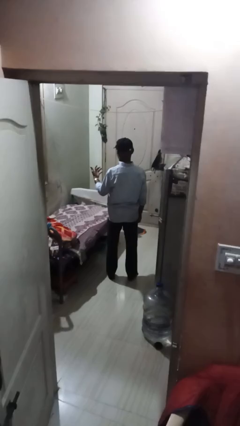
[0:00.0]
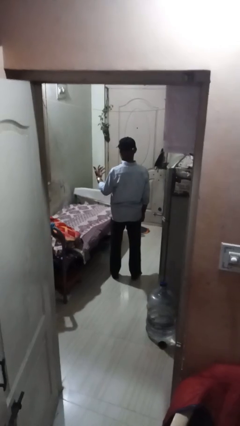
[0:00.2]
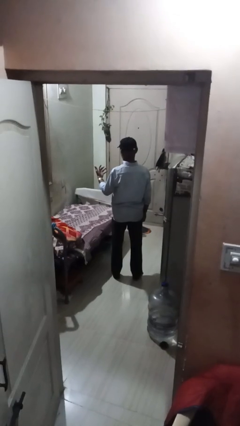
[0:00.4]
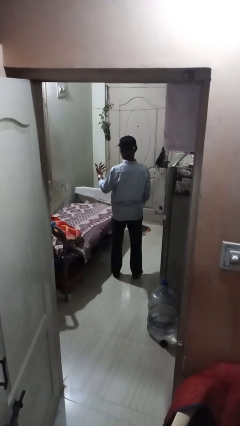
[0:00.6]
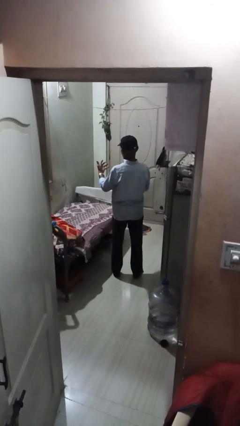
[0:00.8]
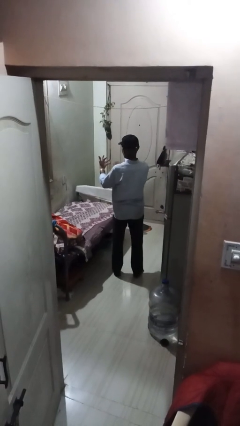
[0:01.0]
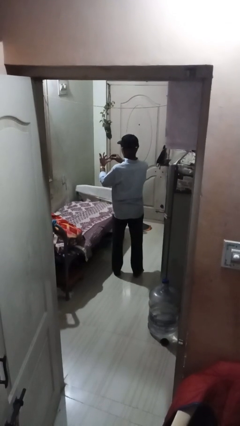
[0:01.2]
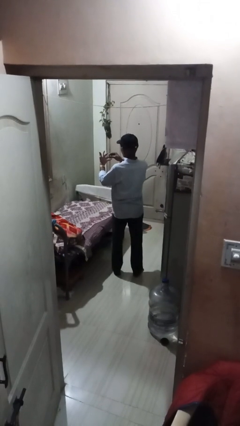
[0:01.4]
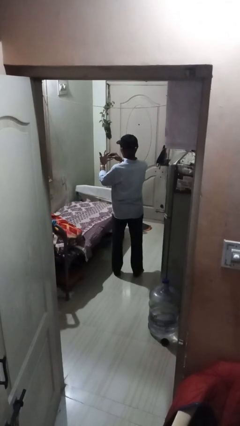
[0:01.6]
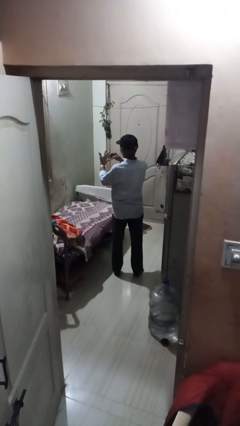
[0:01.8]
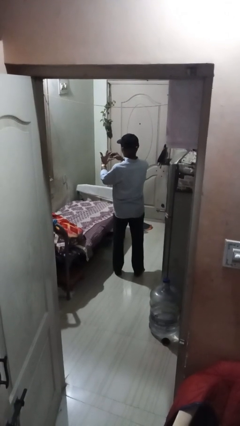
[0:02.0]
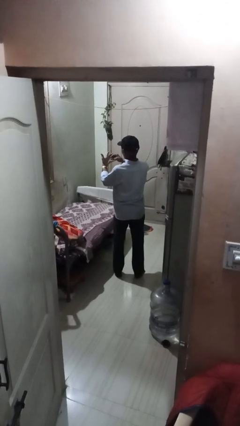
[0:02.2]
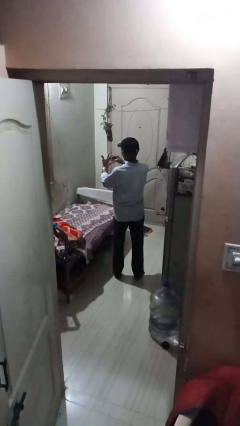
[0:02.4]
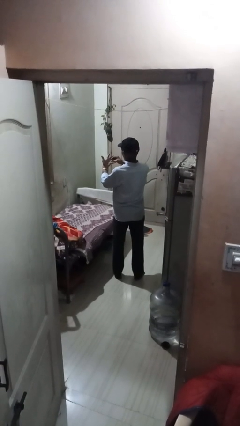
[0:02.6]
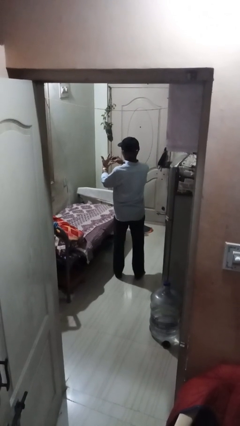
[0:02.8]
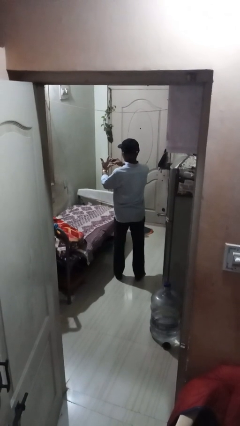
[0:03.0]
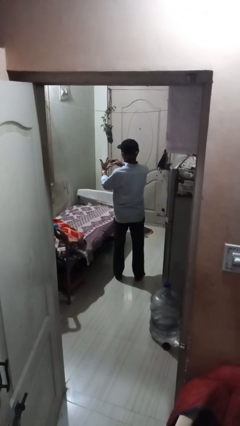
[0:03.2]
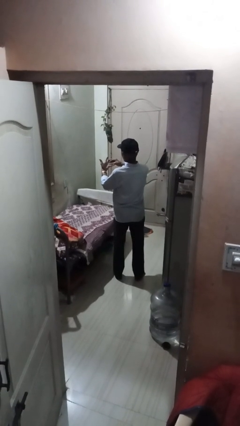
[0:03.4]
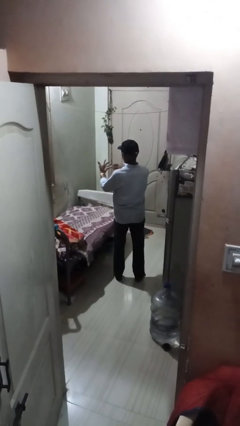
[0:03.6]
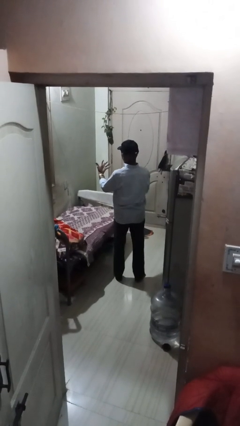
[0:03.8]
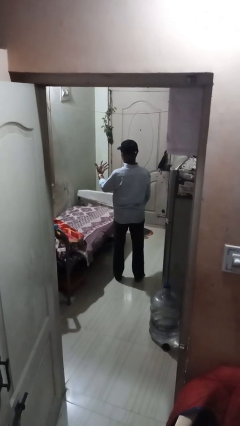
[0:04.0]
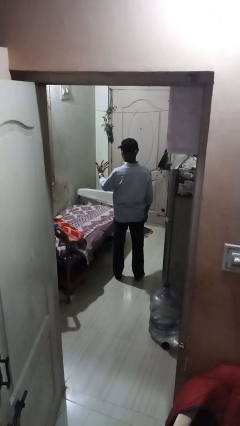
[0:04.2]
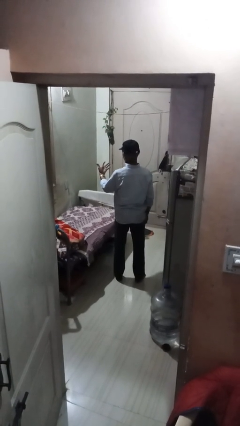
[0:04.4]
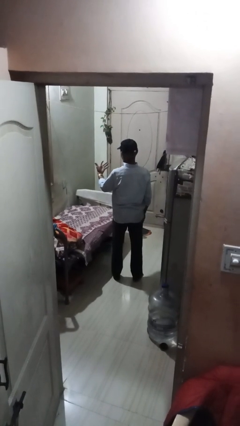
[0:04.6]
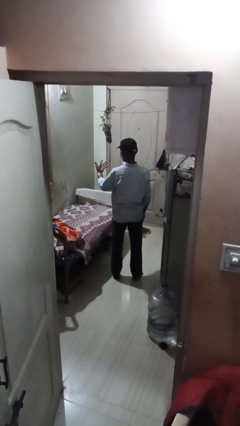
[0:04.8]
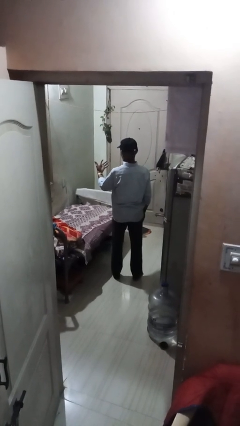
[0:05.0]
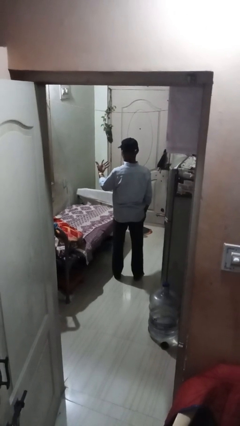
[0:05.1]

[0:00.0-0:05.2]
person puts on ring

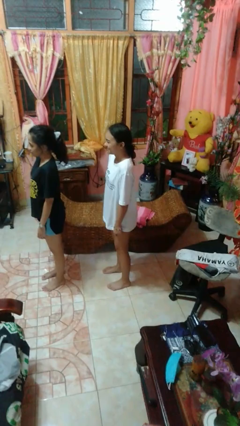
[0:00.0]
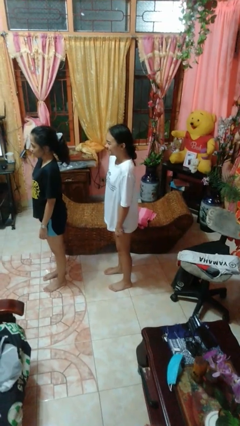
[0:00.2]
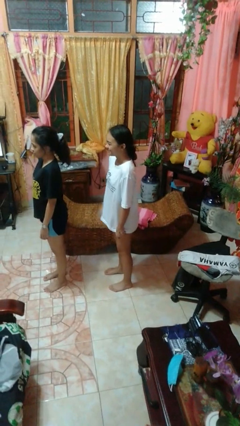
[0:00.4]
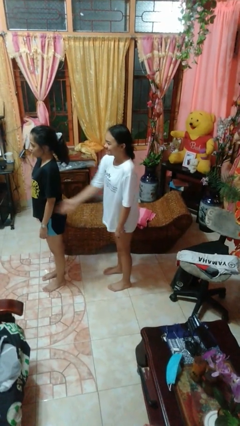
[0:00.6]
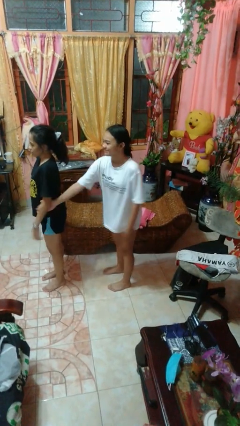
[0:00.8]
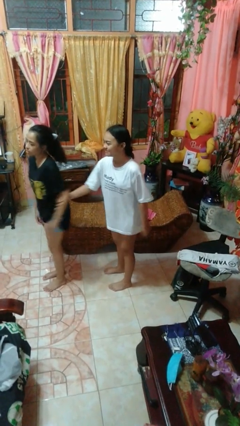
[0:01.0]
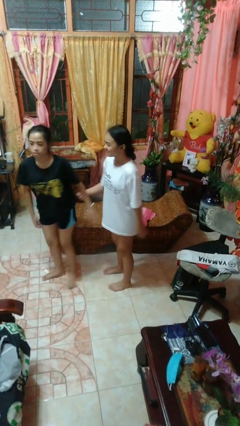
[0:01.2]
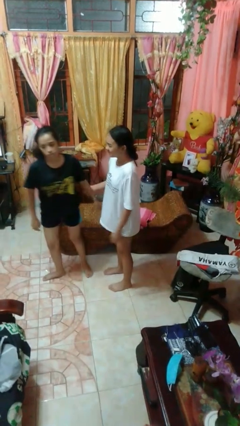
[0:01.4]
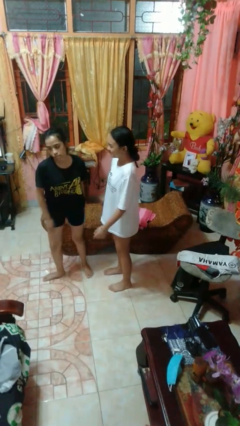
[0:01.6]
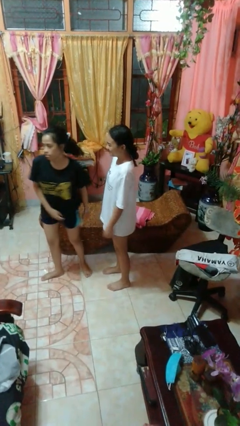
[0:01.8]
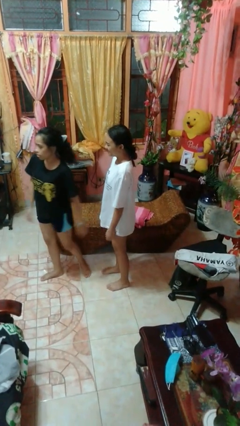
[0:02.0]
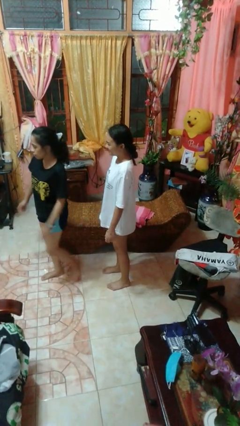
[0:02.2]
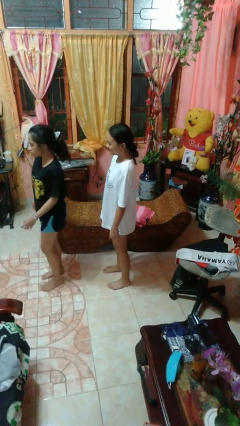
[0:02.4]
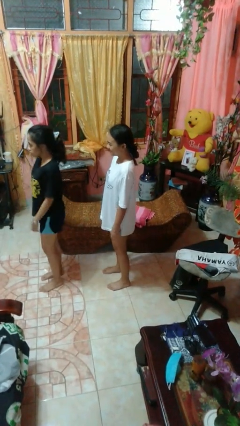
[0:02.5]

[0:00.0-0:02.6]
person grabs person by forearm

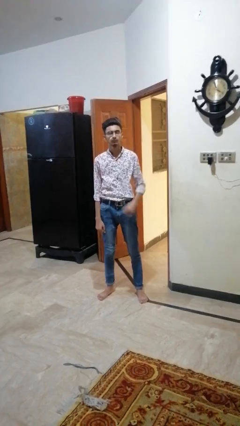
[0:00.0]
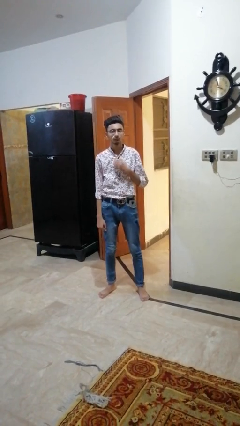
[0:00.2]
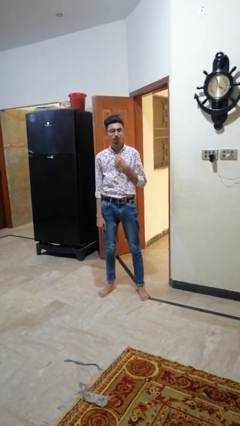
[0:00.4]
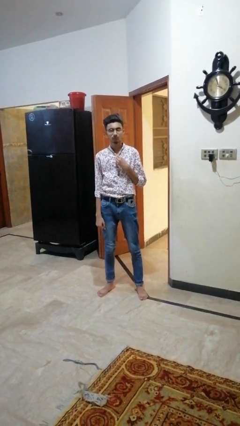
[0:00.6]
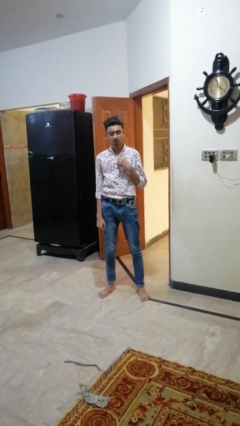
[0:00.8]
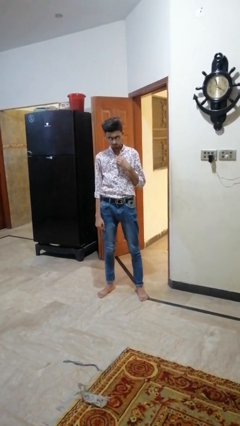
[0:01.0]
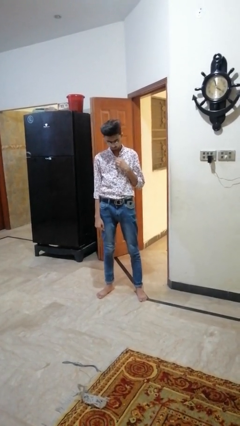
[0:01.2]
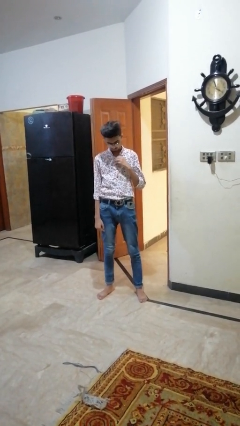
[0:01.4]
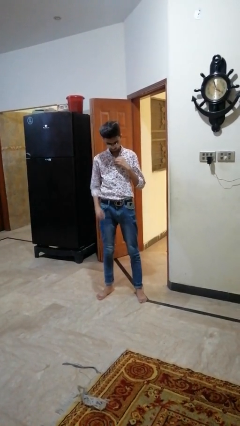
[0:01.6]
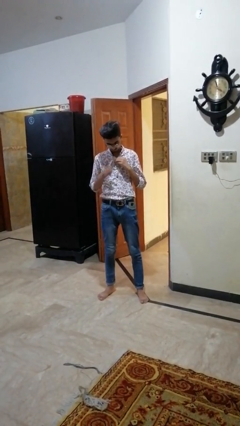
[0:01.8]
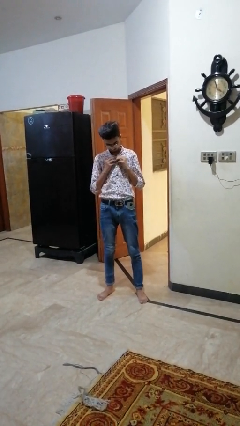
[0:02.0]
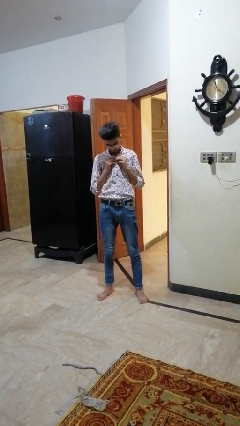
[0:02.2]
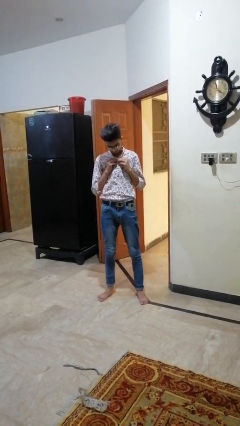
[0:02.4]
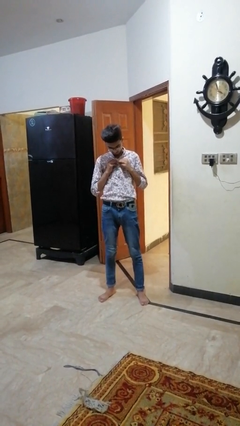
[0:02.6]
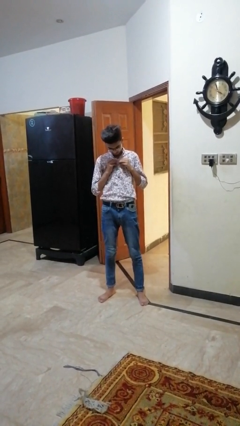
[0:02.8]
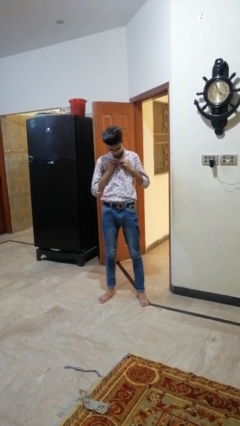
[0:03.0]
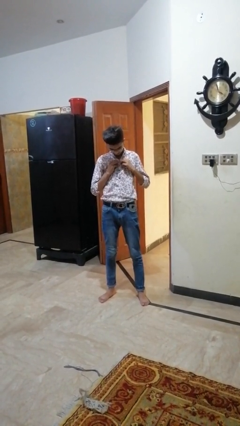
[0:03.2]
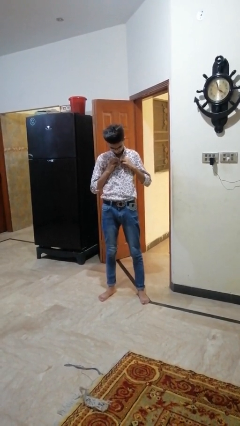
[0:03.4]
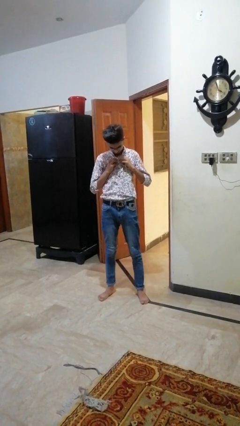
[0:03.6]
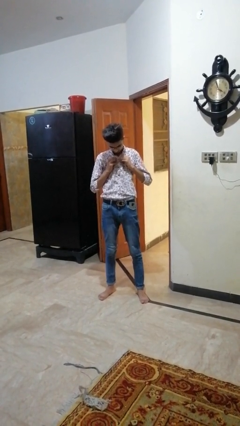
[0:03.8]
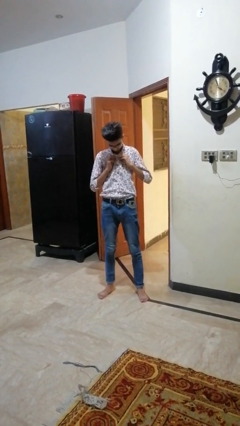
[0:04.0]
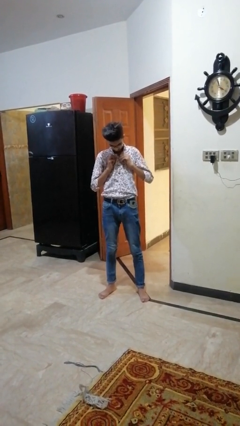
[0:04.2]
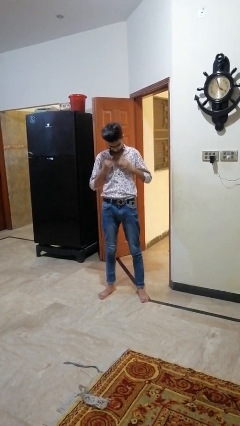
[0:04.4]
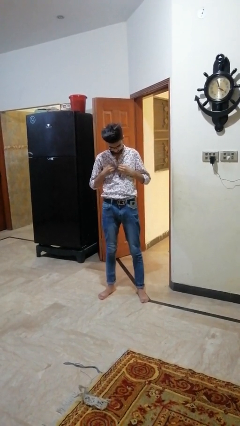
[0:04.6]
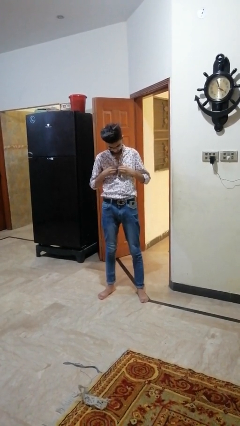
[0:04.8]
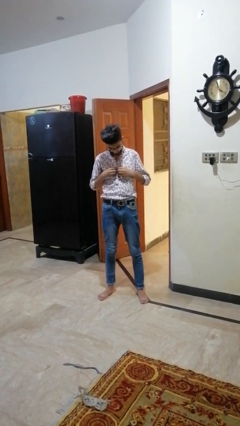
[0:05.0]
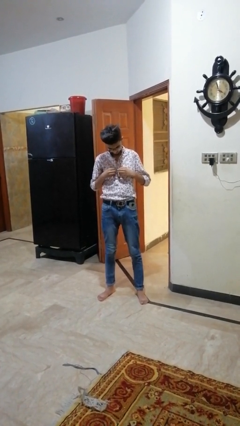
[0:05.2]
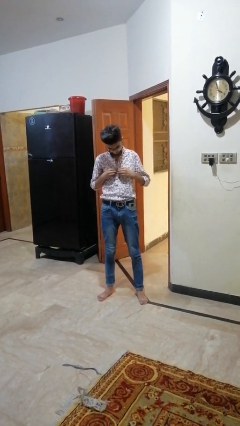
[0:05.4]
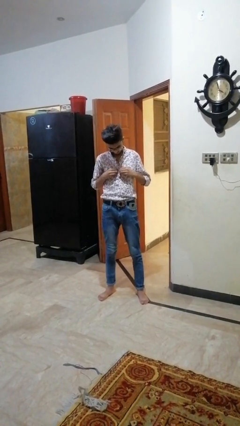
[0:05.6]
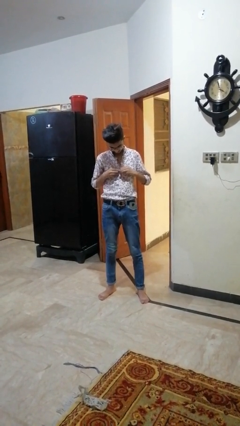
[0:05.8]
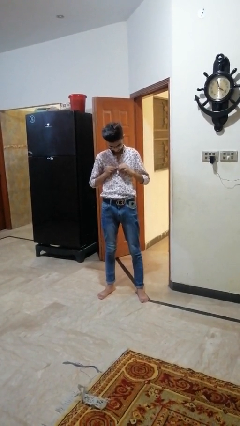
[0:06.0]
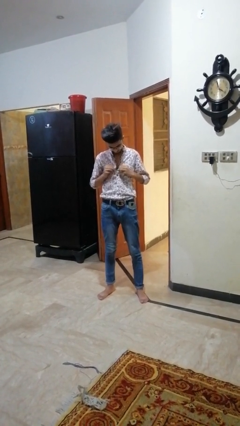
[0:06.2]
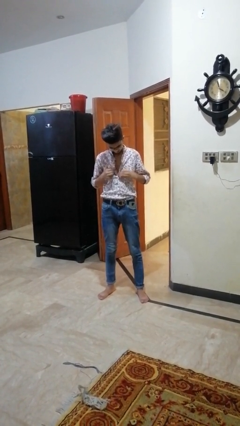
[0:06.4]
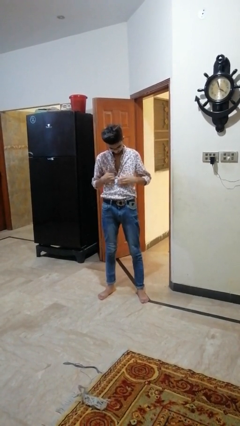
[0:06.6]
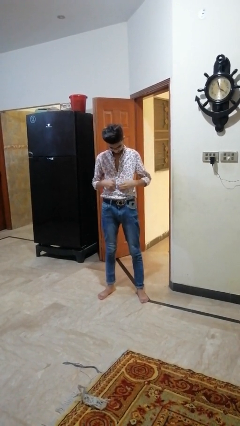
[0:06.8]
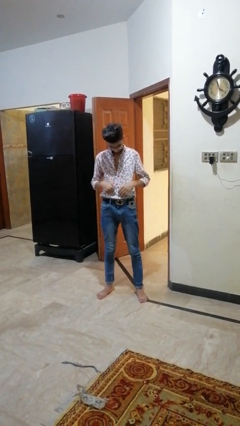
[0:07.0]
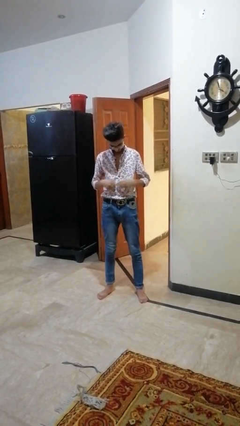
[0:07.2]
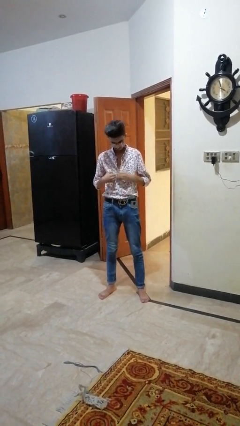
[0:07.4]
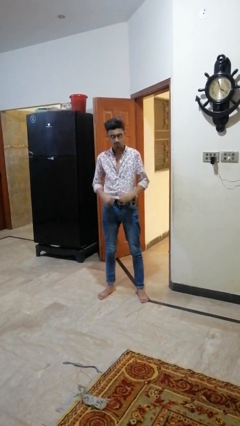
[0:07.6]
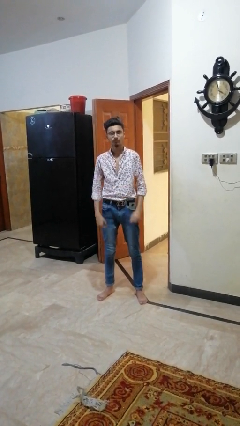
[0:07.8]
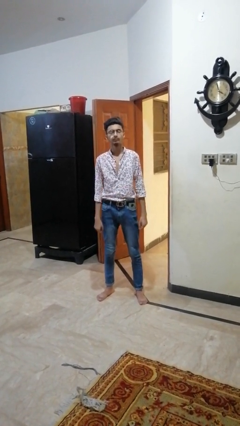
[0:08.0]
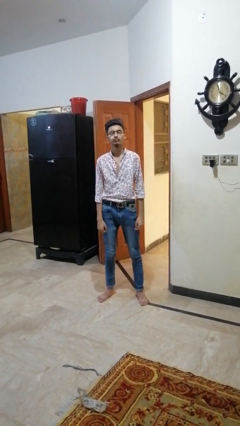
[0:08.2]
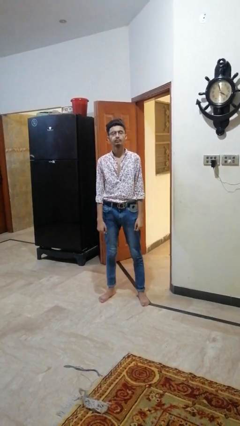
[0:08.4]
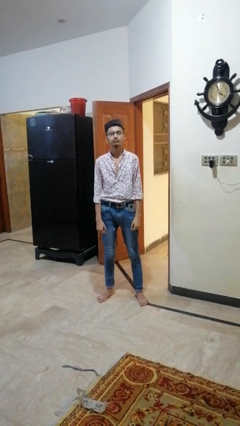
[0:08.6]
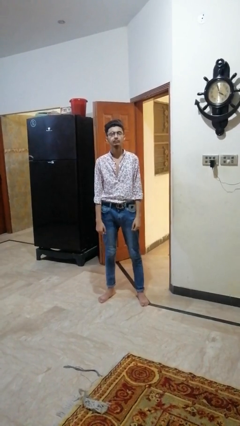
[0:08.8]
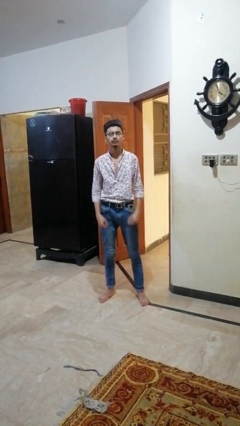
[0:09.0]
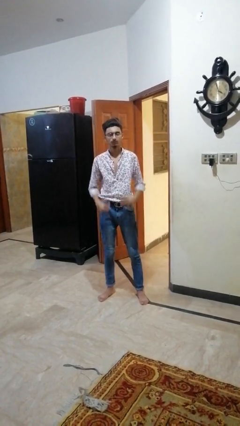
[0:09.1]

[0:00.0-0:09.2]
person unbuttons shirt

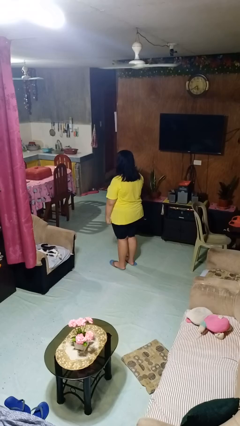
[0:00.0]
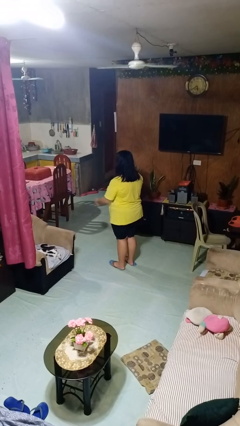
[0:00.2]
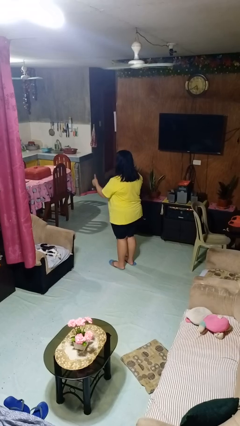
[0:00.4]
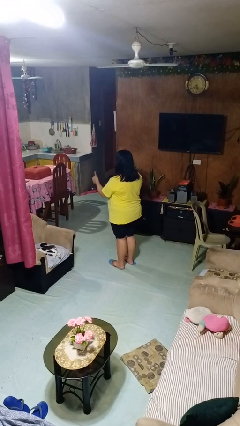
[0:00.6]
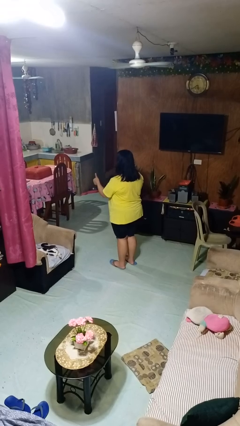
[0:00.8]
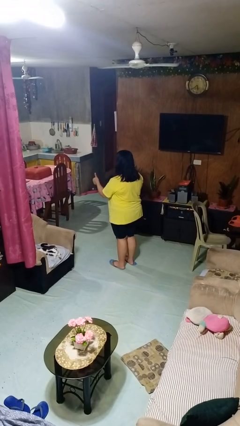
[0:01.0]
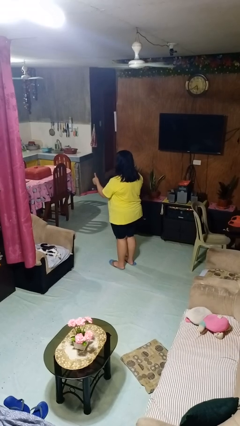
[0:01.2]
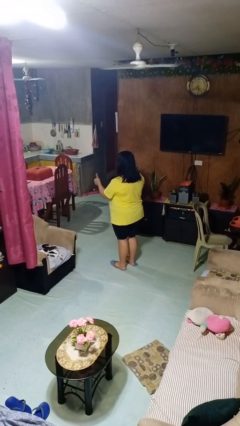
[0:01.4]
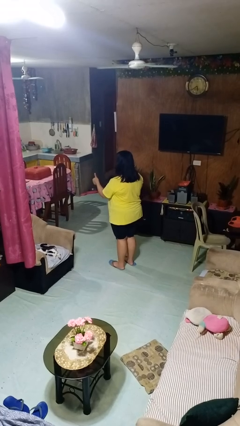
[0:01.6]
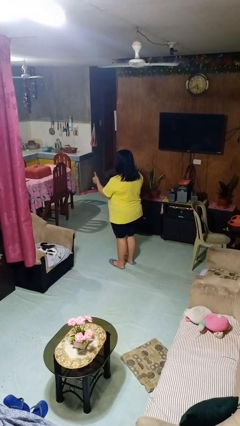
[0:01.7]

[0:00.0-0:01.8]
person gestures thumbs up
